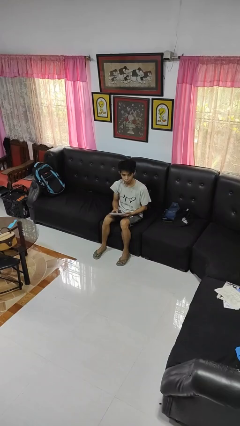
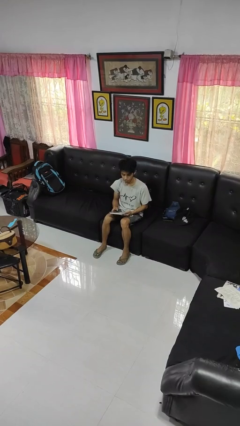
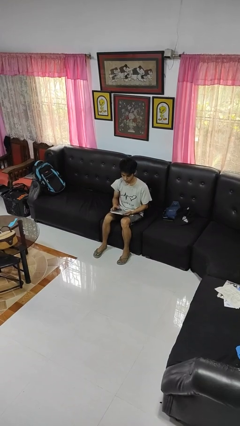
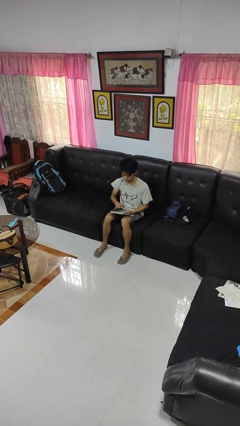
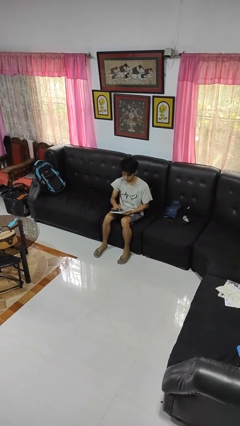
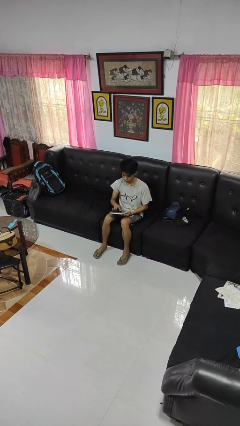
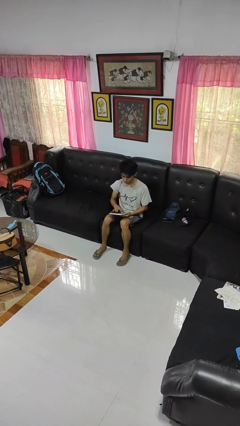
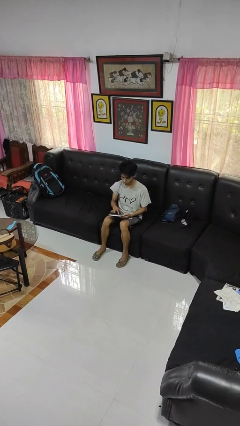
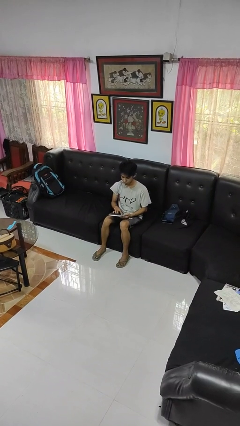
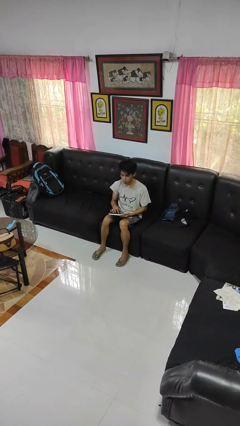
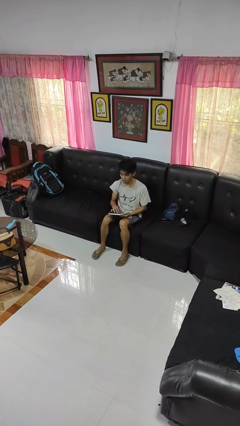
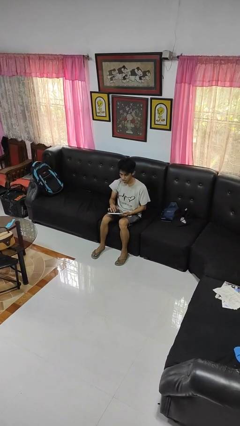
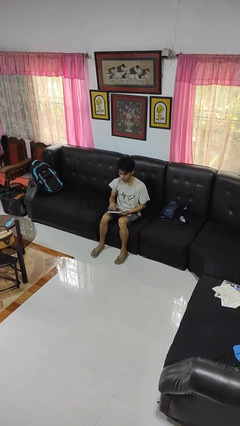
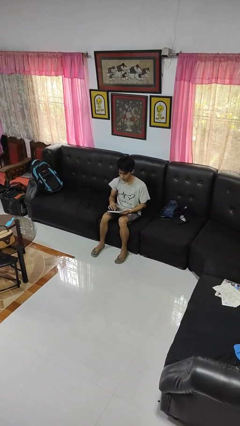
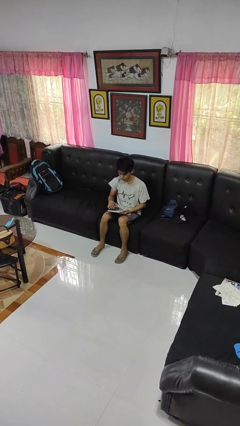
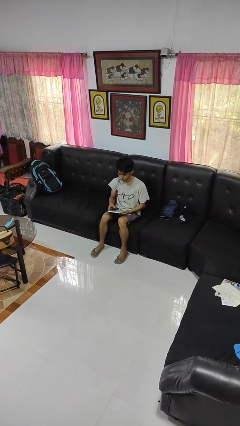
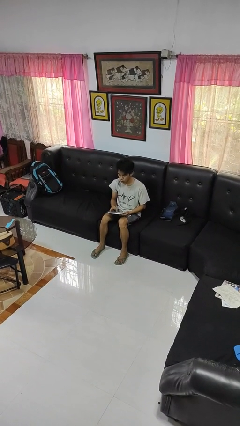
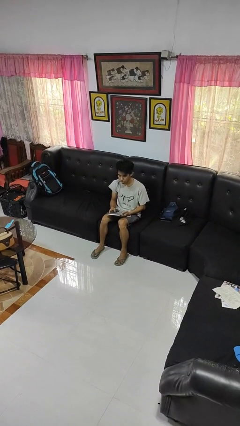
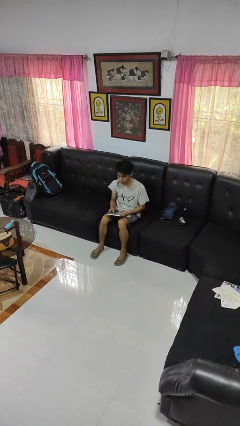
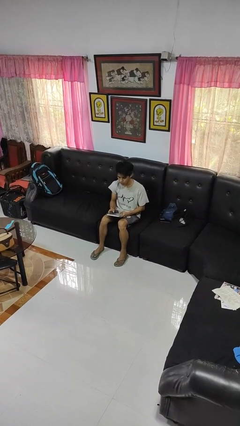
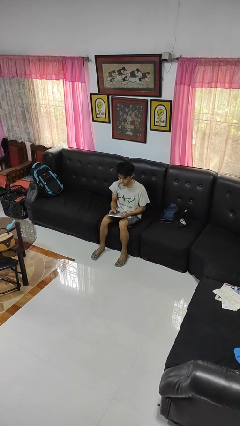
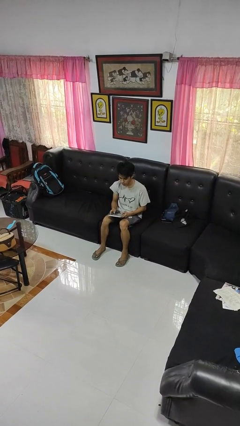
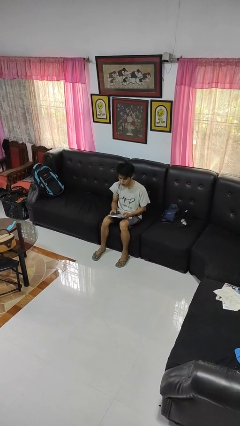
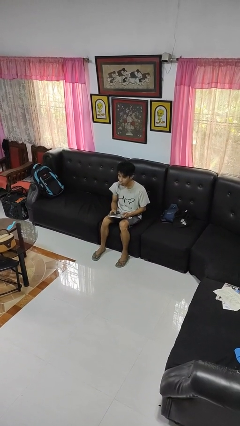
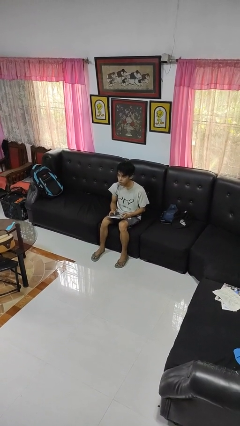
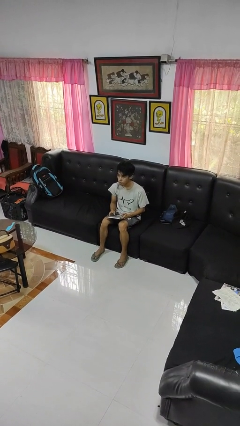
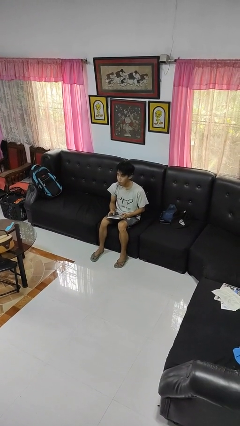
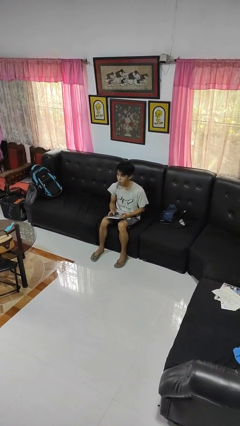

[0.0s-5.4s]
person interacts with tablet

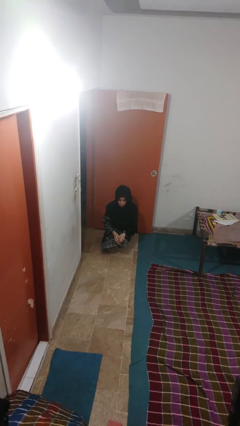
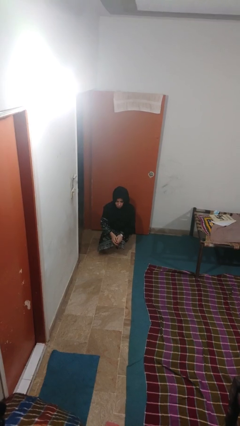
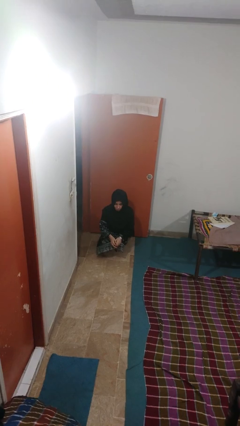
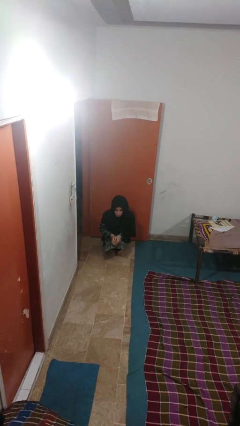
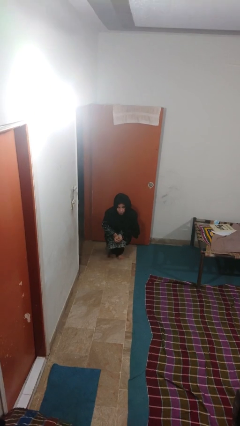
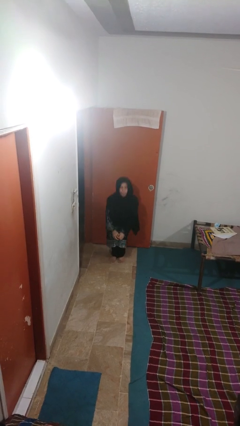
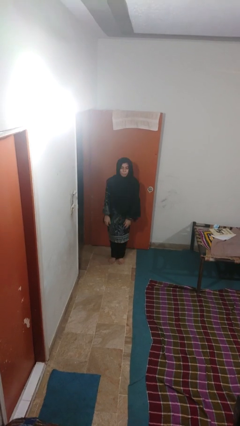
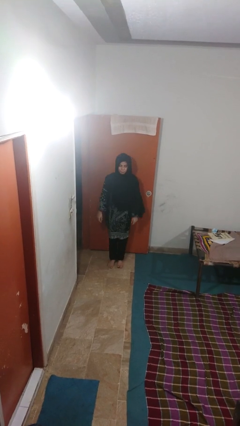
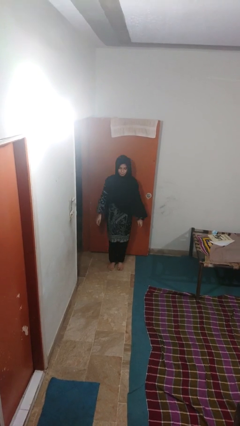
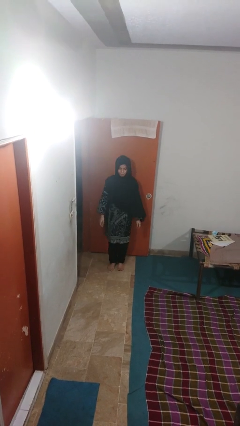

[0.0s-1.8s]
person stands up

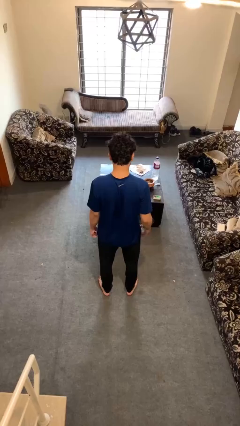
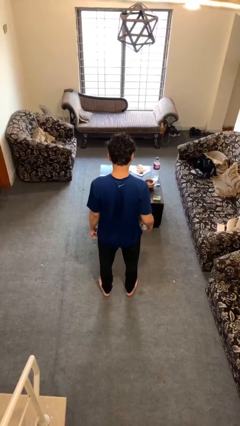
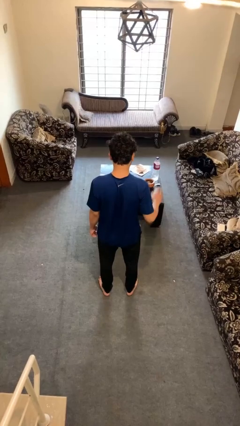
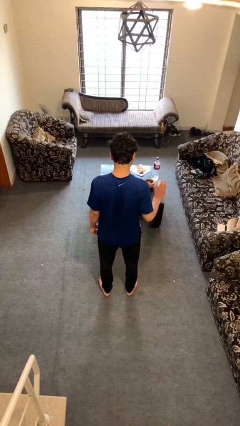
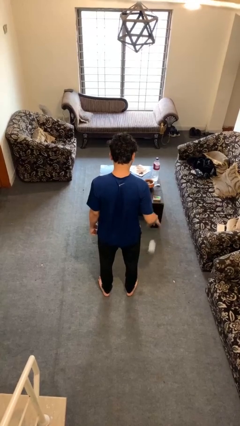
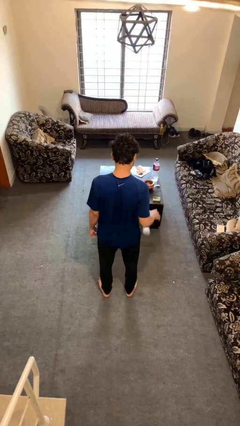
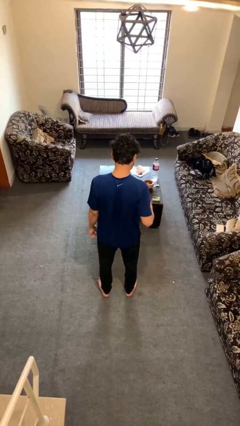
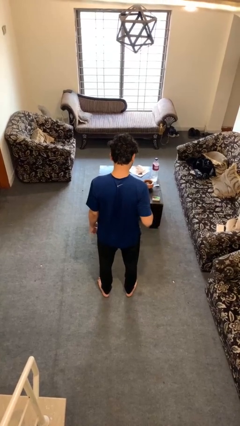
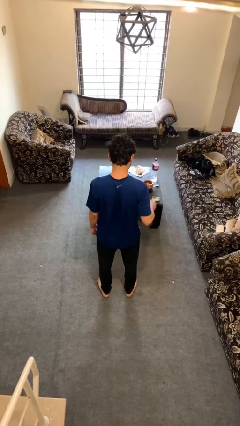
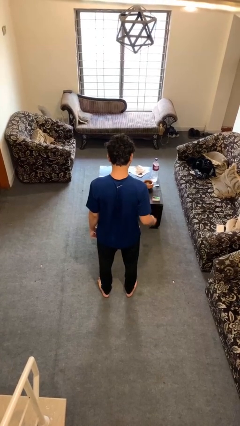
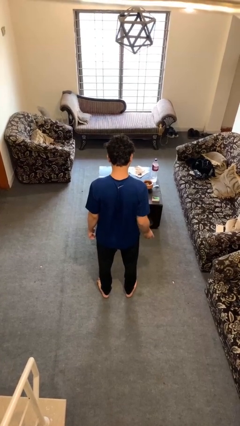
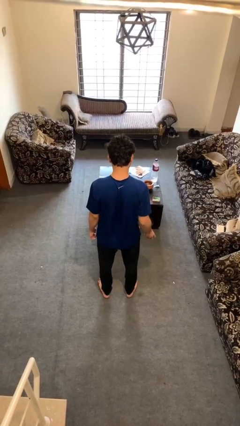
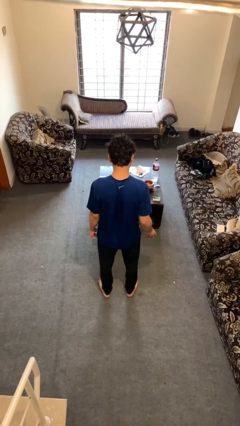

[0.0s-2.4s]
person bounces ball on floor

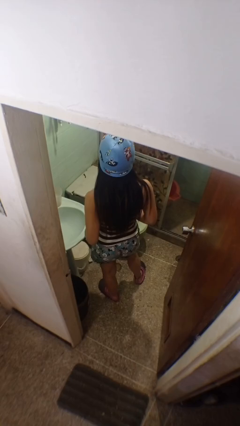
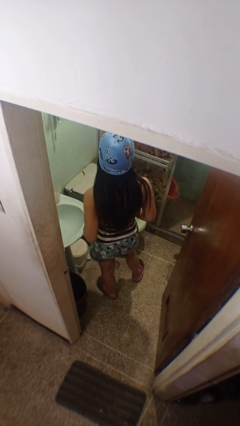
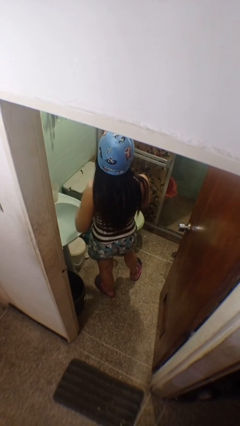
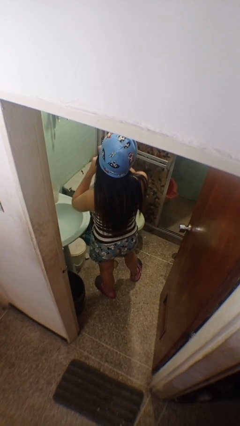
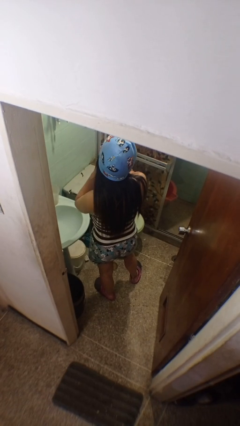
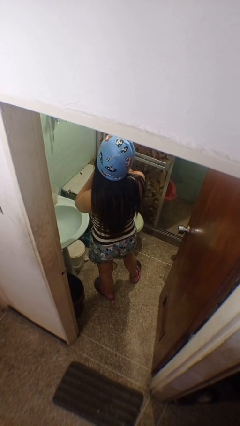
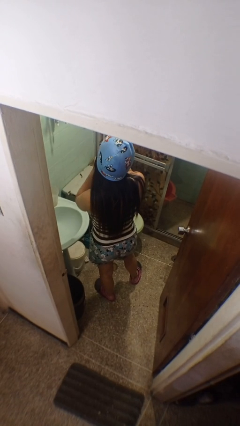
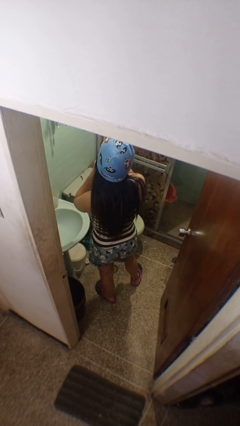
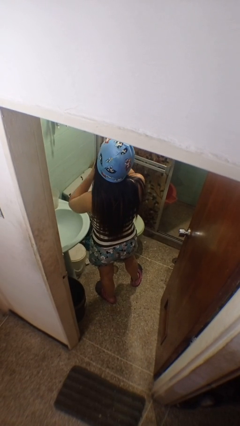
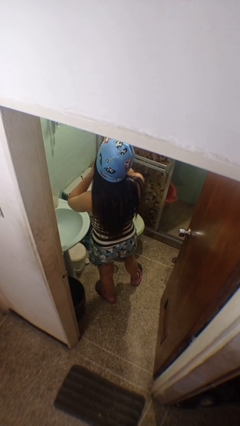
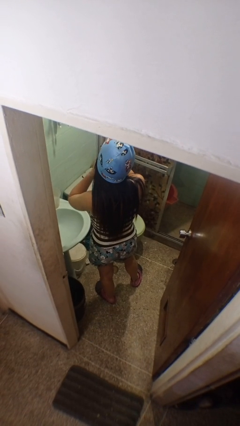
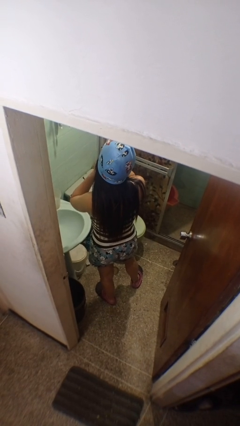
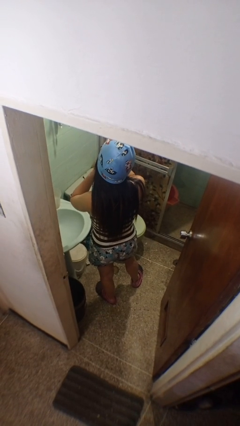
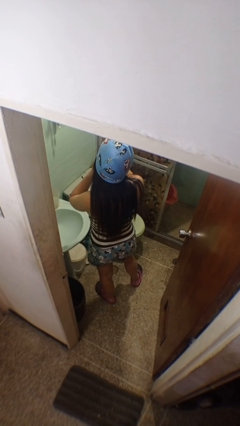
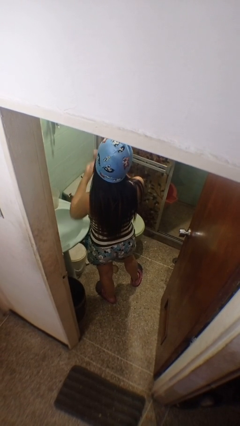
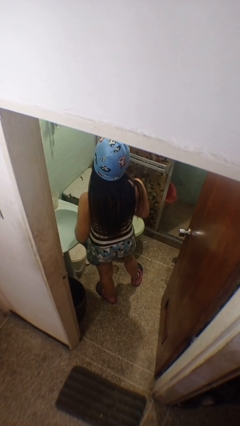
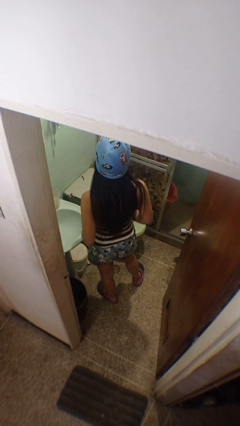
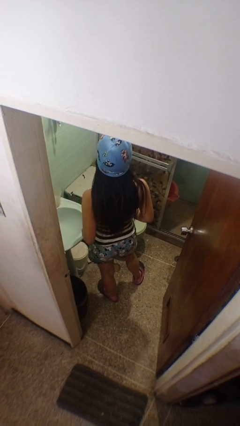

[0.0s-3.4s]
person flosses

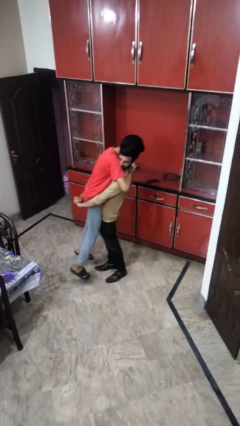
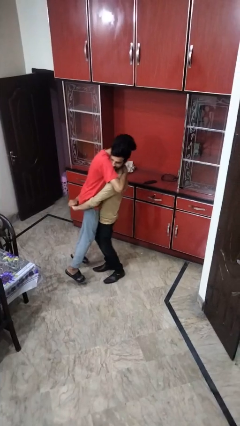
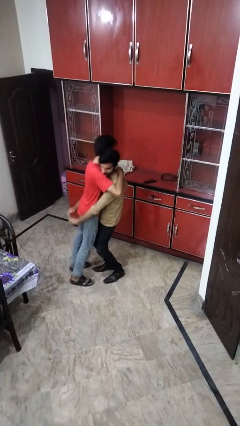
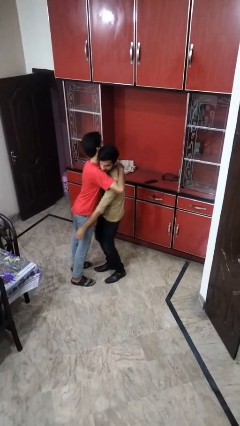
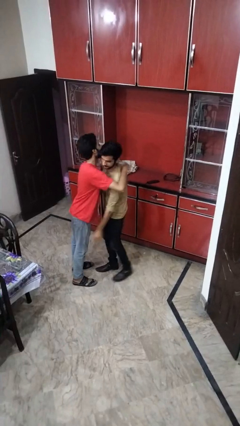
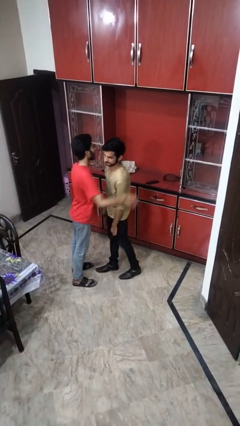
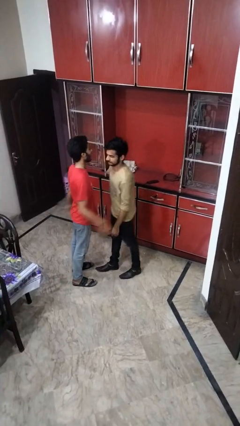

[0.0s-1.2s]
person puts down person

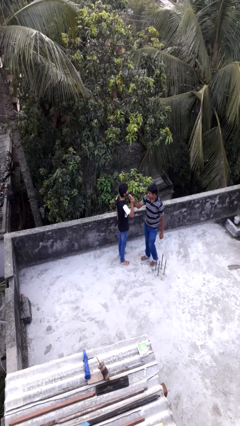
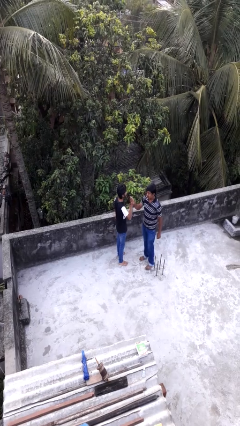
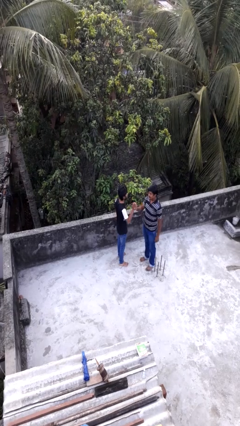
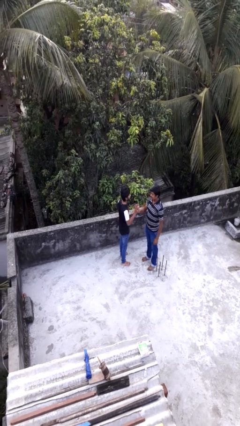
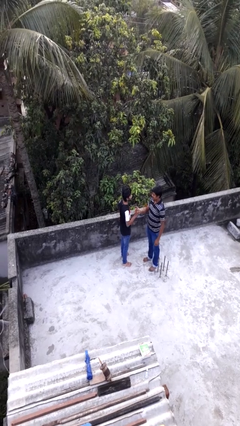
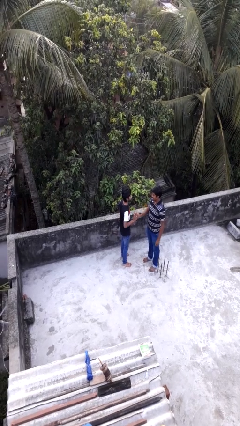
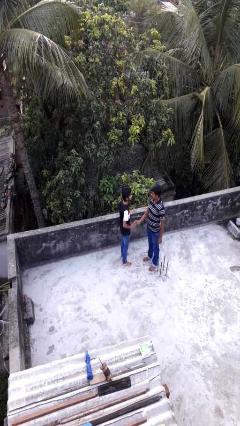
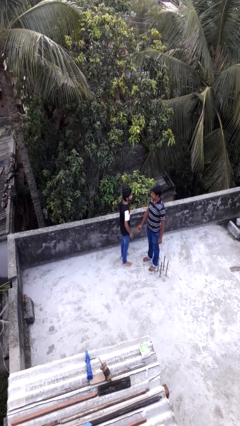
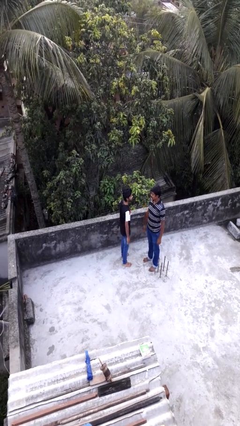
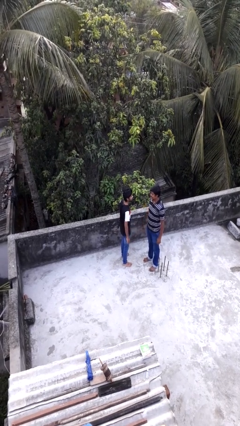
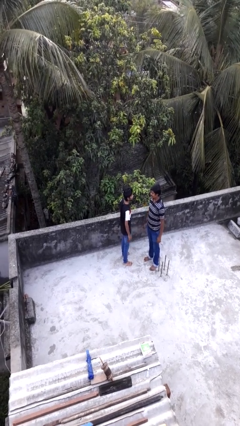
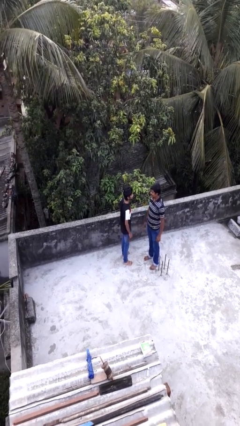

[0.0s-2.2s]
person highfives hand

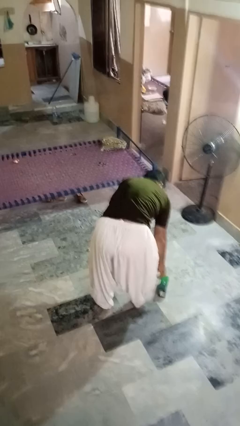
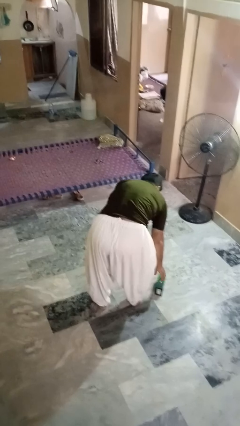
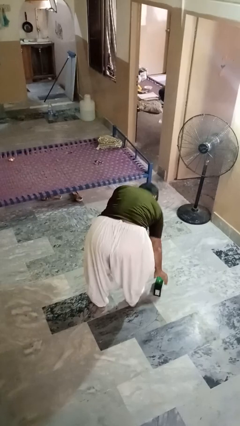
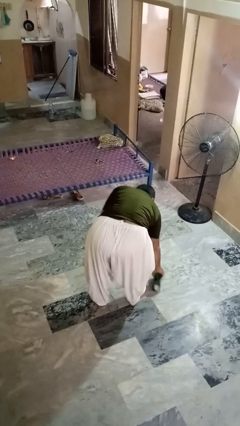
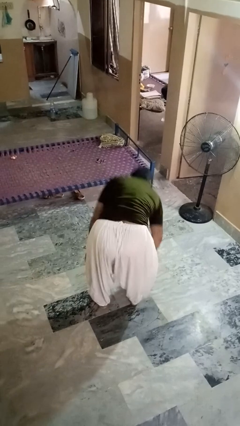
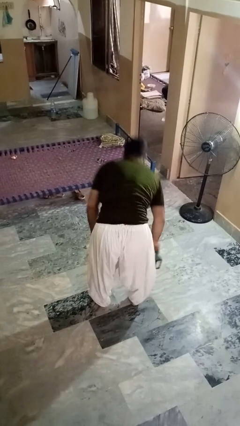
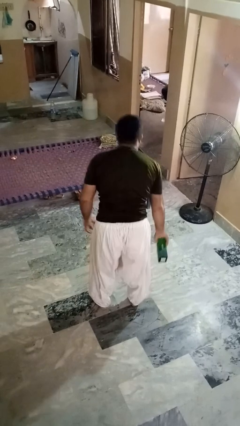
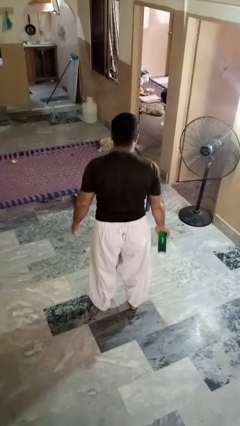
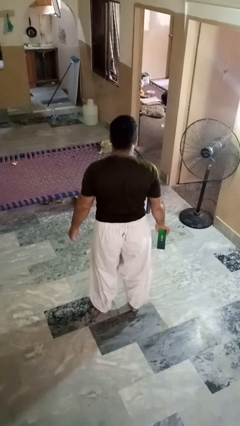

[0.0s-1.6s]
person picks up object from floor
